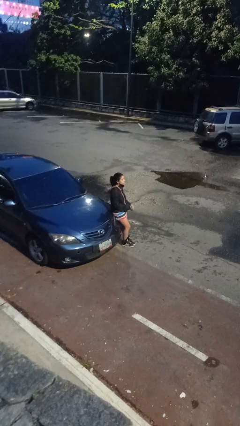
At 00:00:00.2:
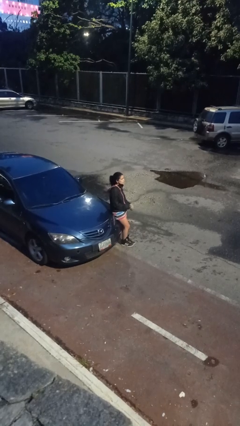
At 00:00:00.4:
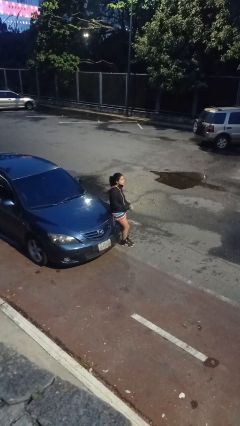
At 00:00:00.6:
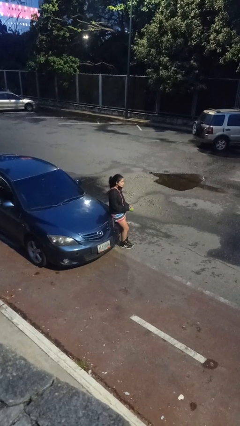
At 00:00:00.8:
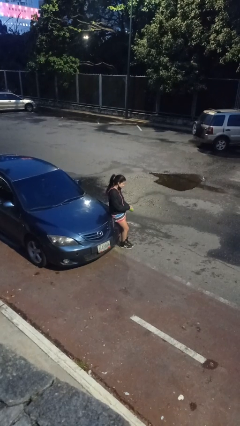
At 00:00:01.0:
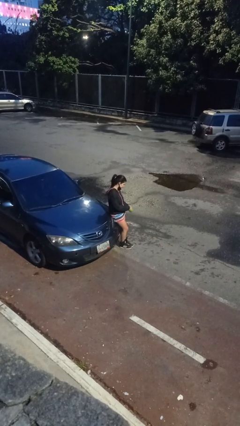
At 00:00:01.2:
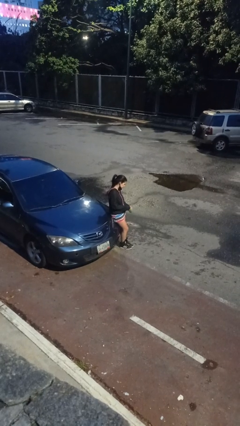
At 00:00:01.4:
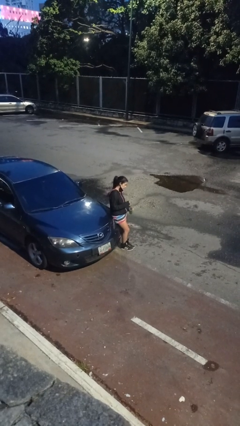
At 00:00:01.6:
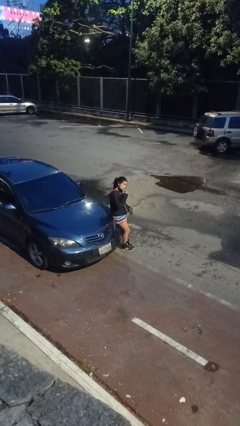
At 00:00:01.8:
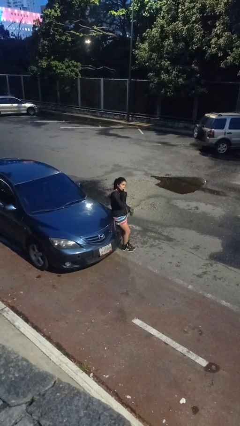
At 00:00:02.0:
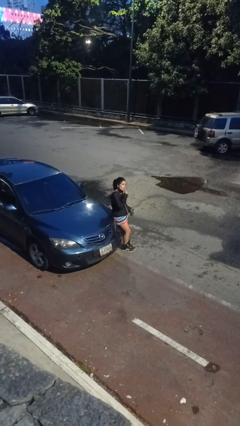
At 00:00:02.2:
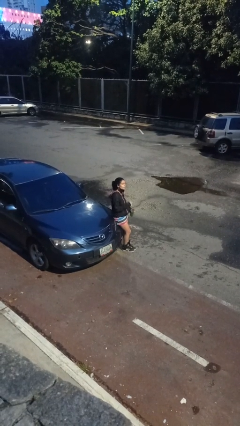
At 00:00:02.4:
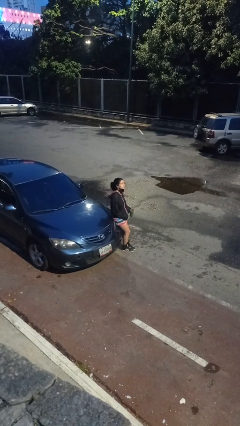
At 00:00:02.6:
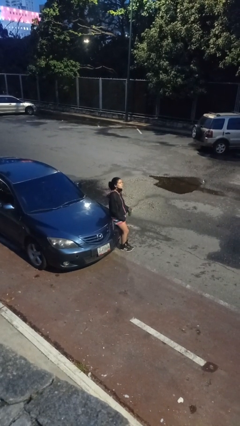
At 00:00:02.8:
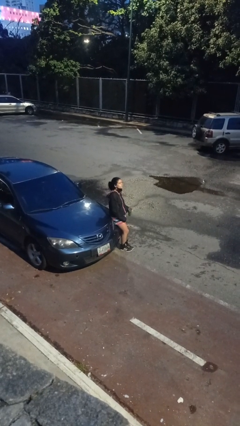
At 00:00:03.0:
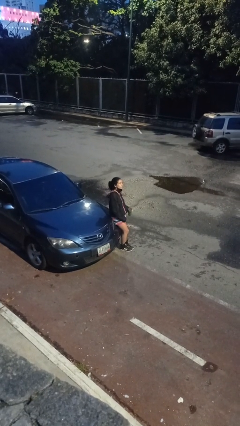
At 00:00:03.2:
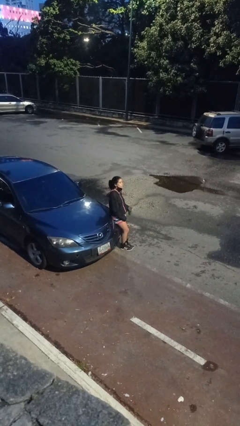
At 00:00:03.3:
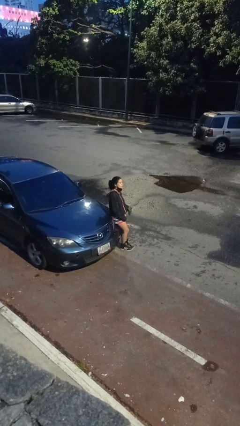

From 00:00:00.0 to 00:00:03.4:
person eats snack from bag

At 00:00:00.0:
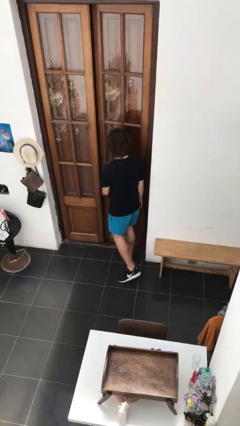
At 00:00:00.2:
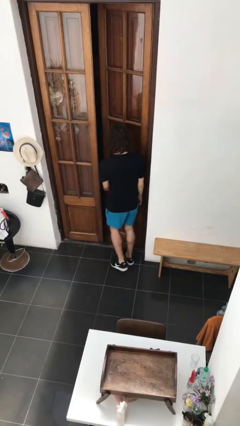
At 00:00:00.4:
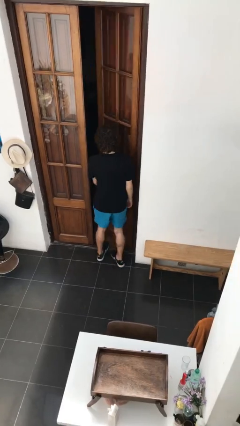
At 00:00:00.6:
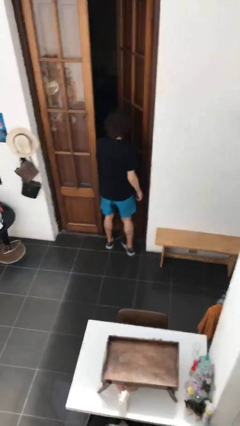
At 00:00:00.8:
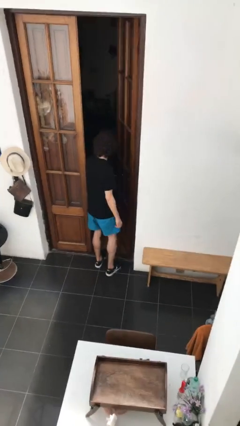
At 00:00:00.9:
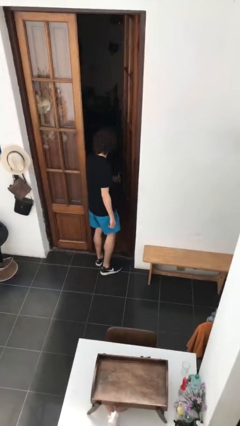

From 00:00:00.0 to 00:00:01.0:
person closes facility door

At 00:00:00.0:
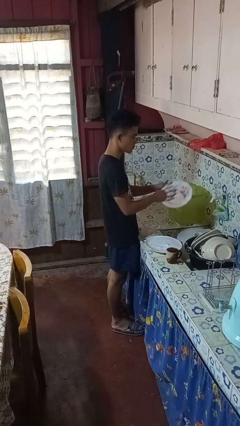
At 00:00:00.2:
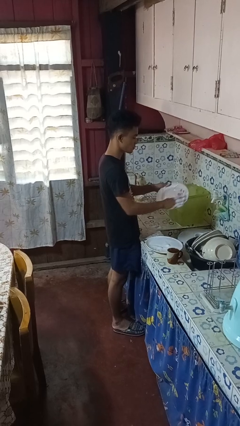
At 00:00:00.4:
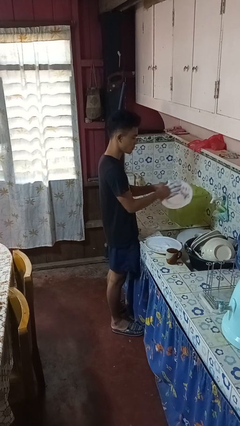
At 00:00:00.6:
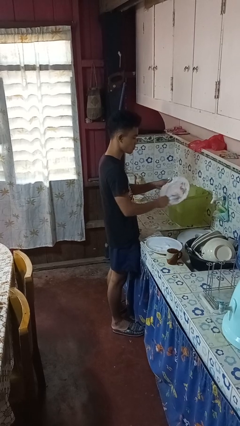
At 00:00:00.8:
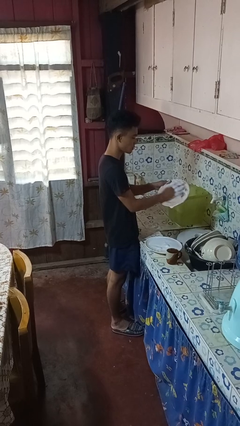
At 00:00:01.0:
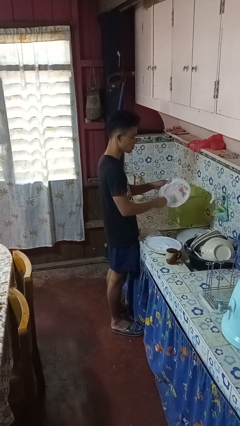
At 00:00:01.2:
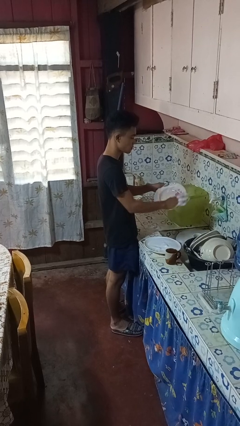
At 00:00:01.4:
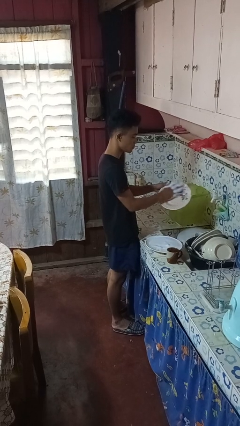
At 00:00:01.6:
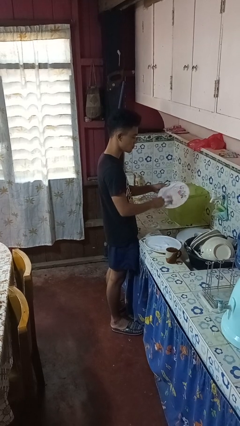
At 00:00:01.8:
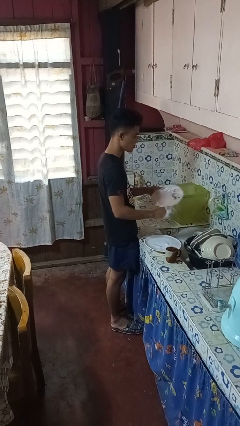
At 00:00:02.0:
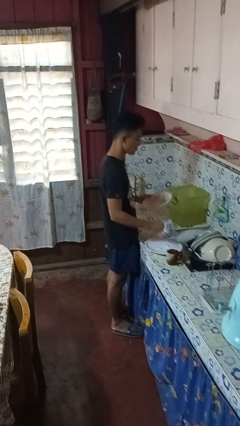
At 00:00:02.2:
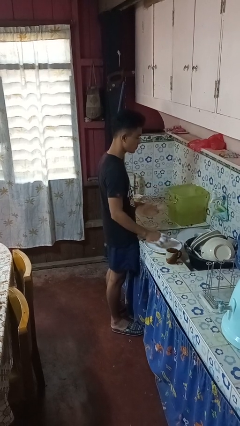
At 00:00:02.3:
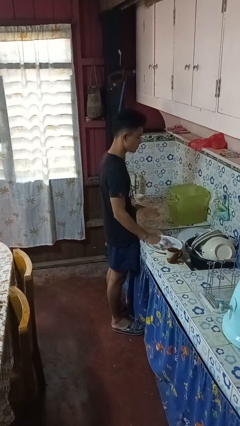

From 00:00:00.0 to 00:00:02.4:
person washes dish

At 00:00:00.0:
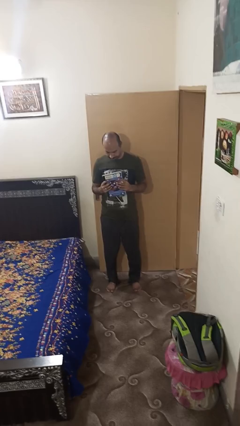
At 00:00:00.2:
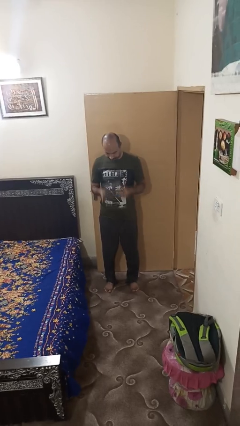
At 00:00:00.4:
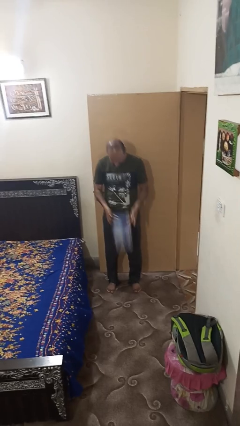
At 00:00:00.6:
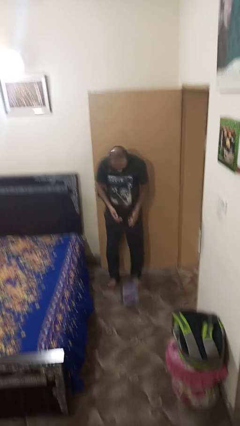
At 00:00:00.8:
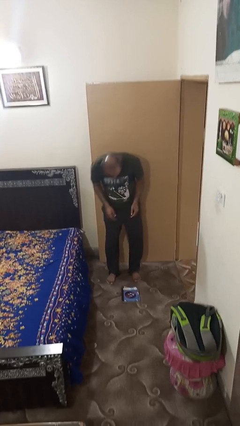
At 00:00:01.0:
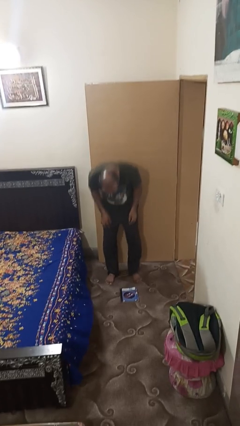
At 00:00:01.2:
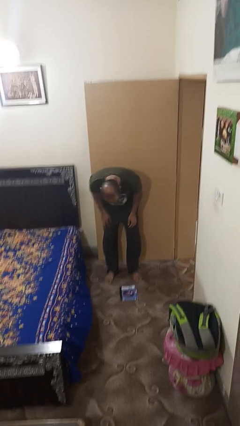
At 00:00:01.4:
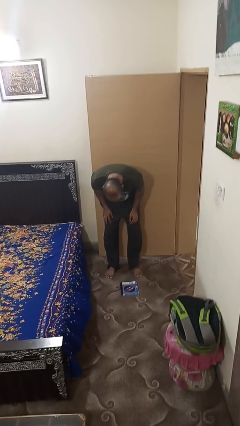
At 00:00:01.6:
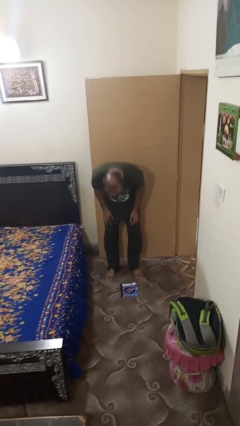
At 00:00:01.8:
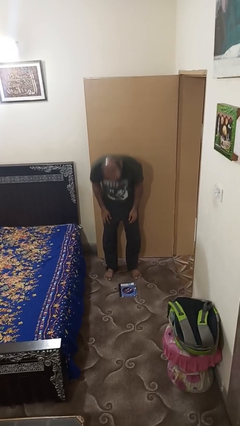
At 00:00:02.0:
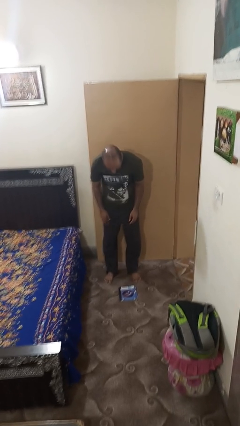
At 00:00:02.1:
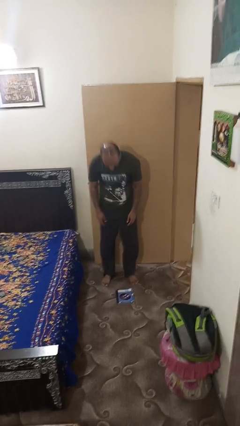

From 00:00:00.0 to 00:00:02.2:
person drops object

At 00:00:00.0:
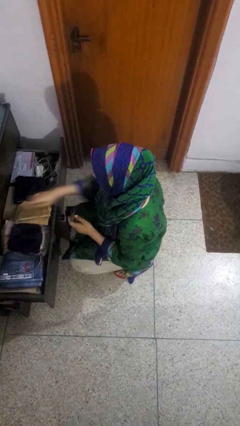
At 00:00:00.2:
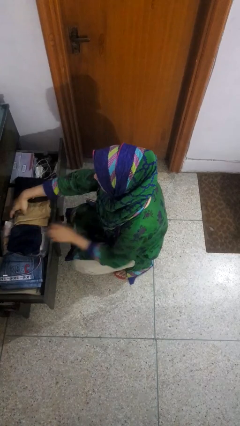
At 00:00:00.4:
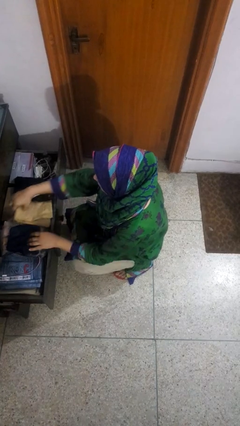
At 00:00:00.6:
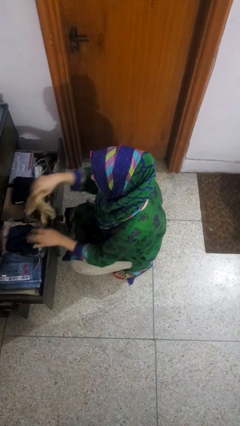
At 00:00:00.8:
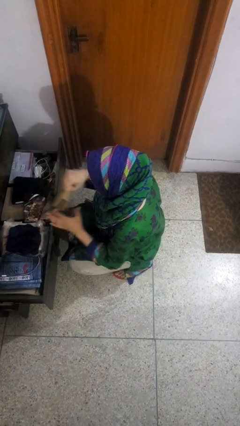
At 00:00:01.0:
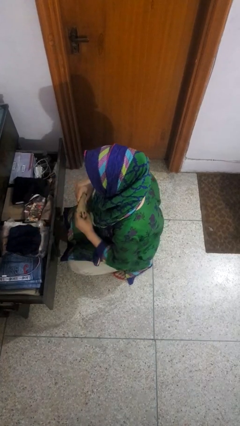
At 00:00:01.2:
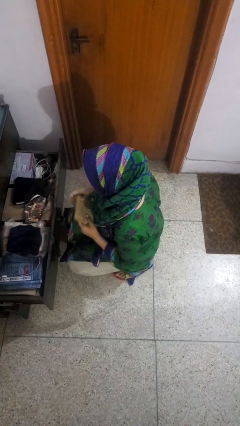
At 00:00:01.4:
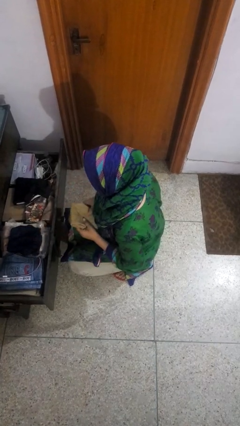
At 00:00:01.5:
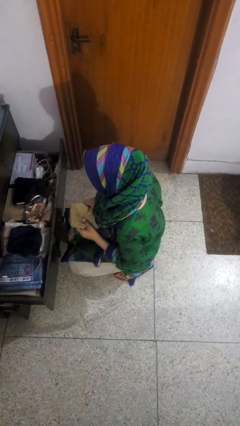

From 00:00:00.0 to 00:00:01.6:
person takes clothes from dresser

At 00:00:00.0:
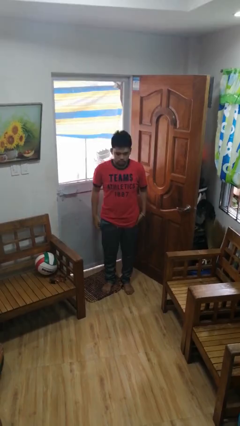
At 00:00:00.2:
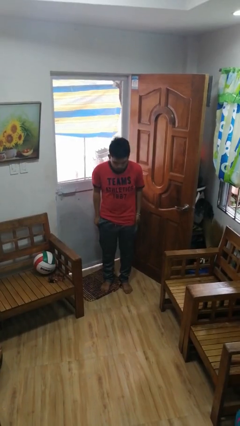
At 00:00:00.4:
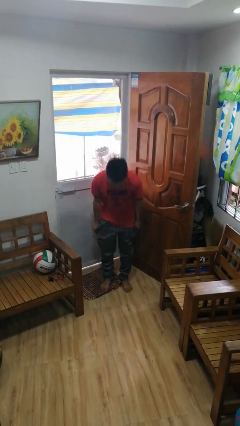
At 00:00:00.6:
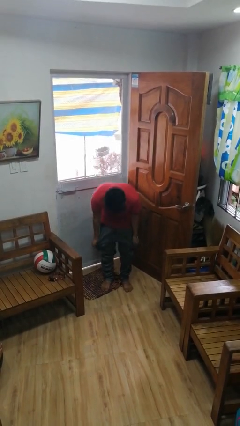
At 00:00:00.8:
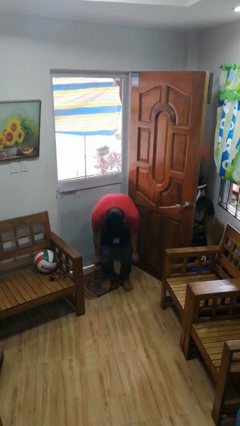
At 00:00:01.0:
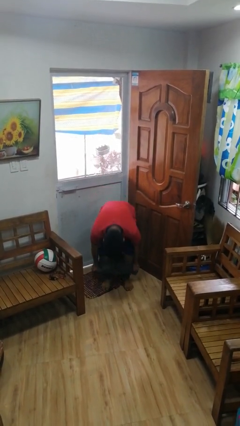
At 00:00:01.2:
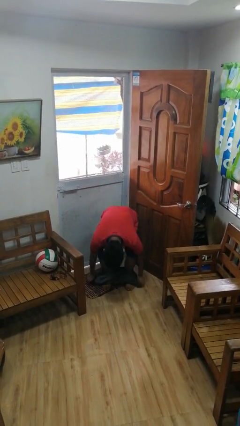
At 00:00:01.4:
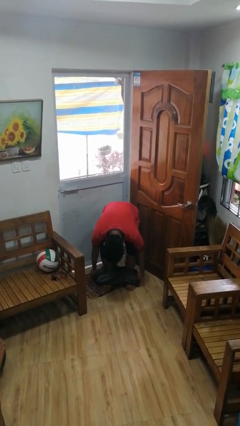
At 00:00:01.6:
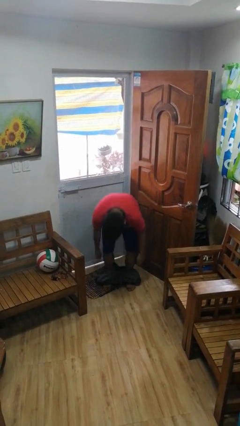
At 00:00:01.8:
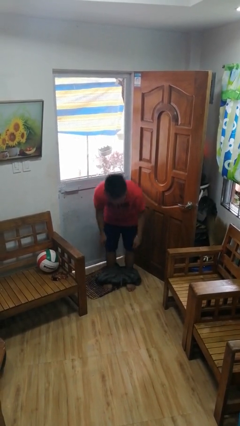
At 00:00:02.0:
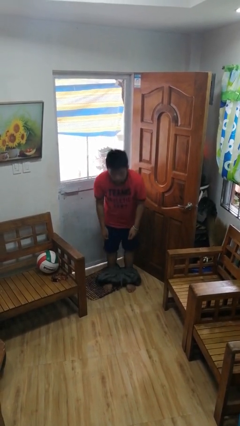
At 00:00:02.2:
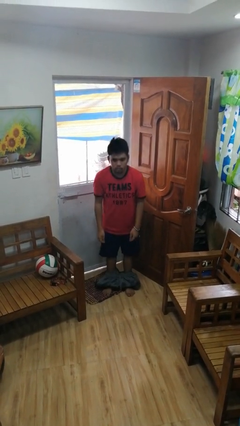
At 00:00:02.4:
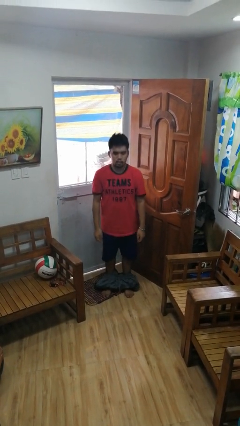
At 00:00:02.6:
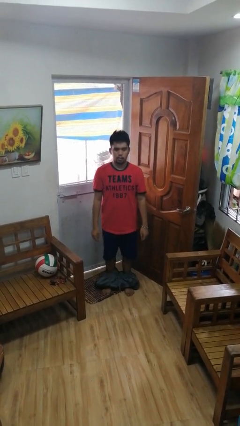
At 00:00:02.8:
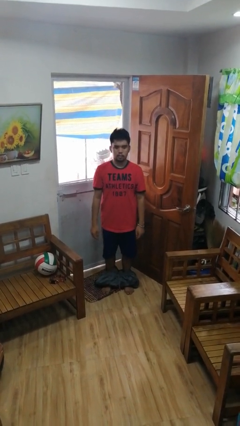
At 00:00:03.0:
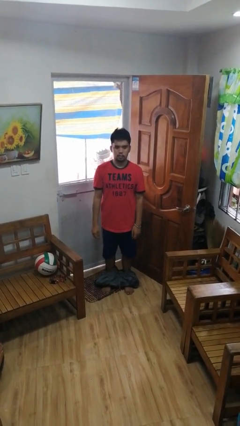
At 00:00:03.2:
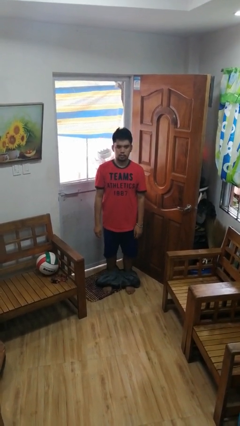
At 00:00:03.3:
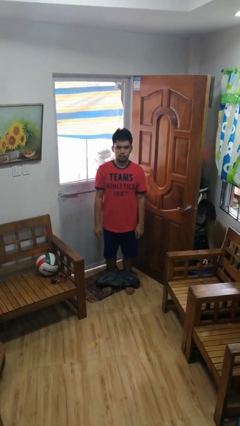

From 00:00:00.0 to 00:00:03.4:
person takes off pants

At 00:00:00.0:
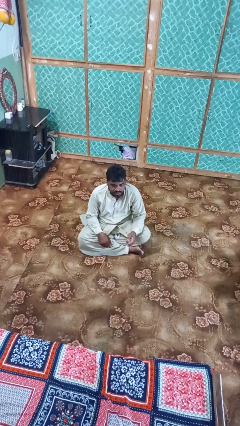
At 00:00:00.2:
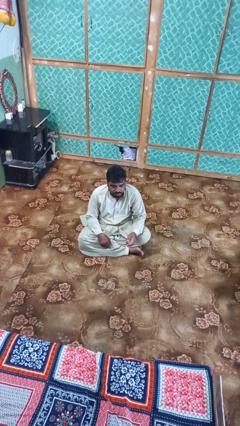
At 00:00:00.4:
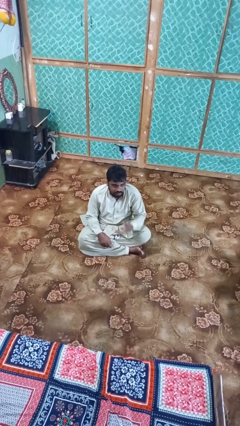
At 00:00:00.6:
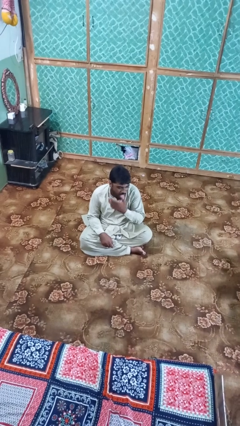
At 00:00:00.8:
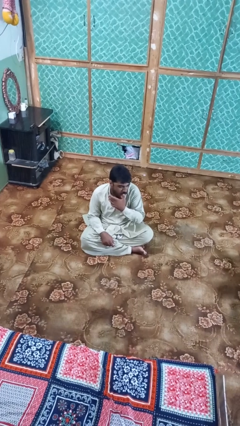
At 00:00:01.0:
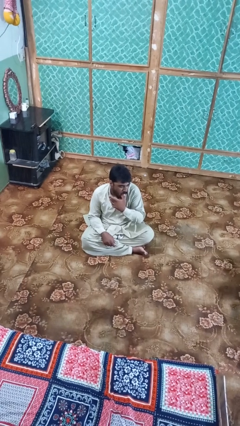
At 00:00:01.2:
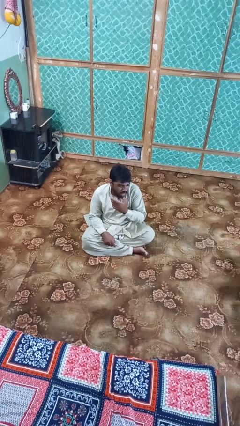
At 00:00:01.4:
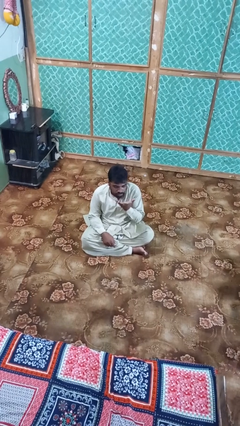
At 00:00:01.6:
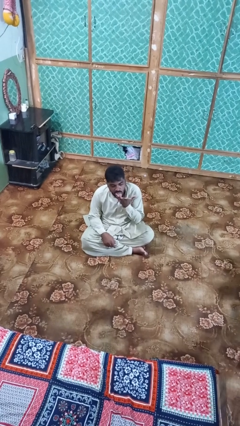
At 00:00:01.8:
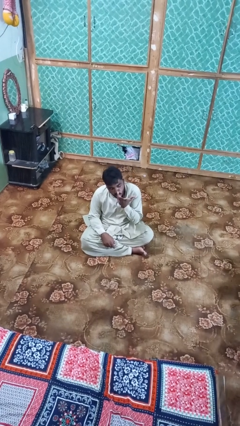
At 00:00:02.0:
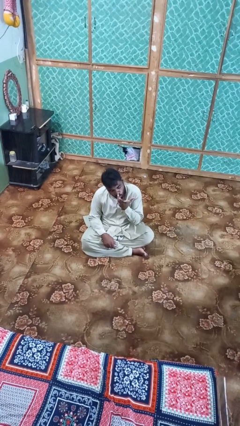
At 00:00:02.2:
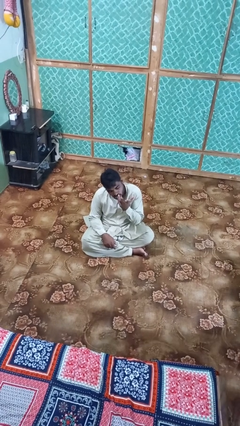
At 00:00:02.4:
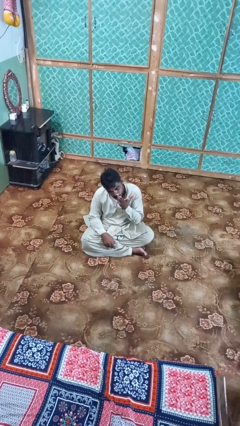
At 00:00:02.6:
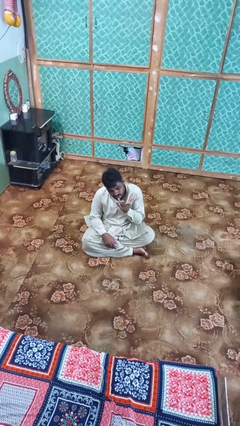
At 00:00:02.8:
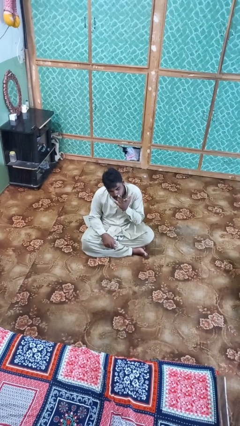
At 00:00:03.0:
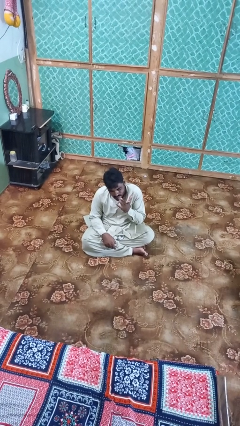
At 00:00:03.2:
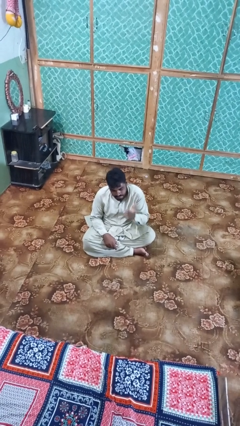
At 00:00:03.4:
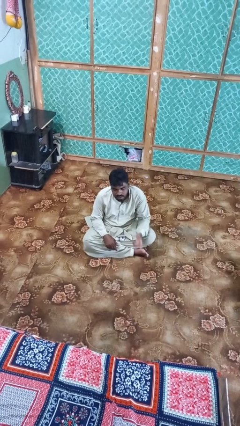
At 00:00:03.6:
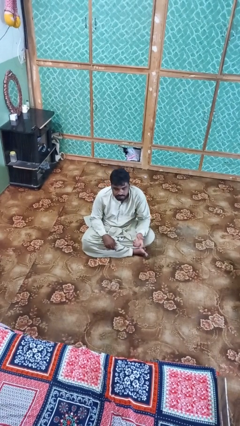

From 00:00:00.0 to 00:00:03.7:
person licks fingers
